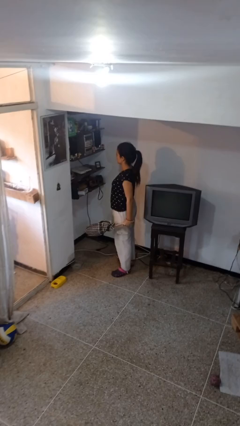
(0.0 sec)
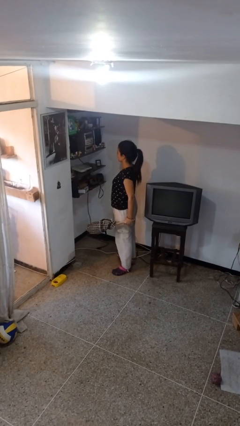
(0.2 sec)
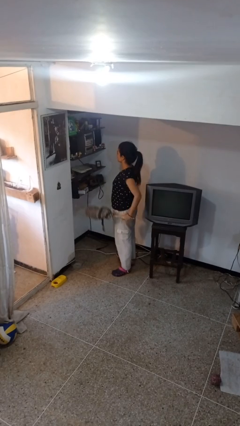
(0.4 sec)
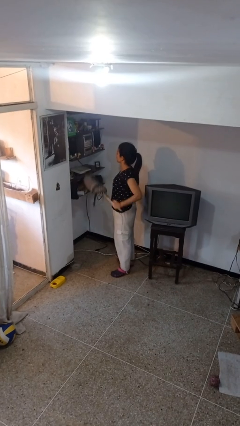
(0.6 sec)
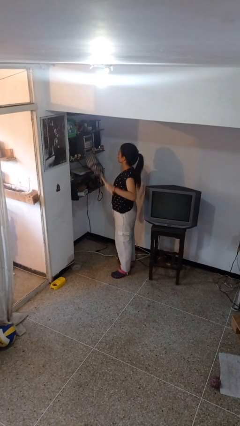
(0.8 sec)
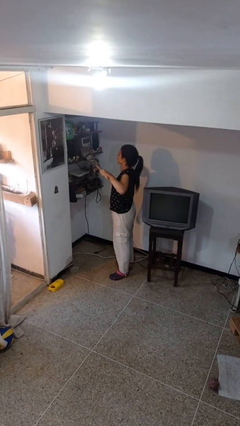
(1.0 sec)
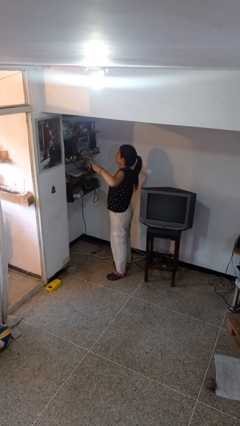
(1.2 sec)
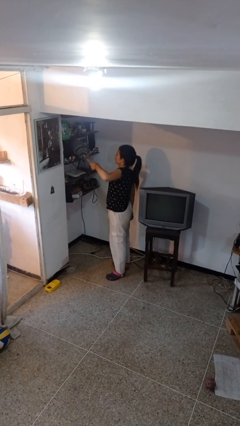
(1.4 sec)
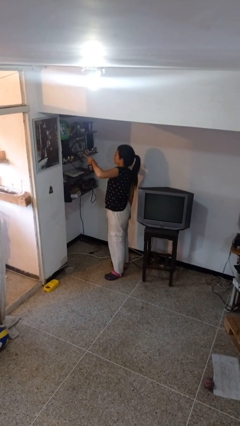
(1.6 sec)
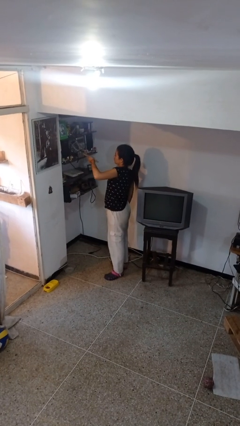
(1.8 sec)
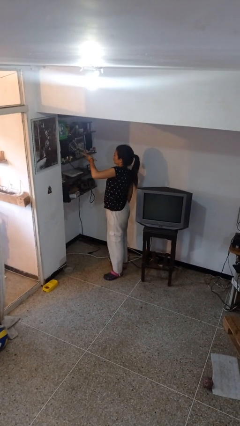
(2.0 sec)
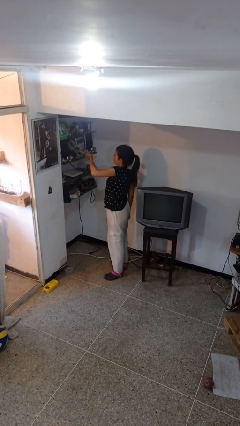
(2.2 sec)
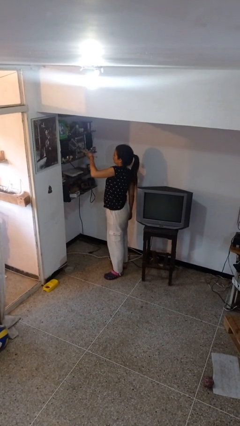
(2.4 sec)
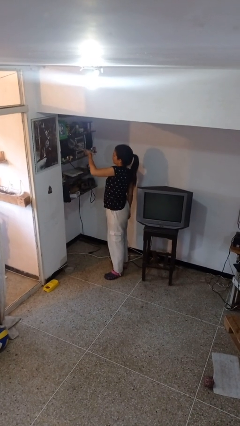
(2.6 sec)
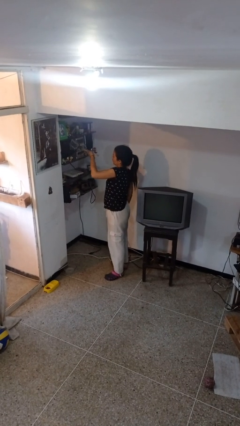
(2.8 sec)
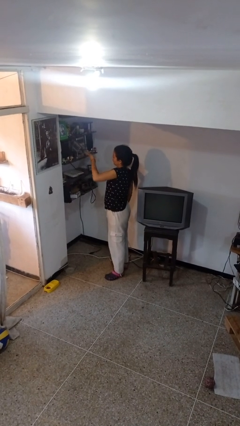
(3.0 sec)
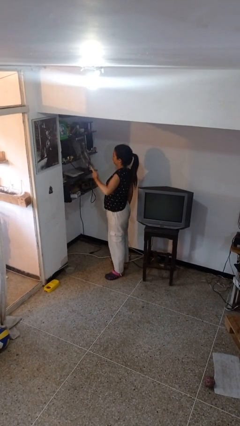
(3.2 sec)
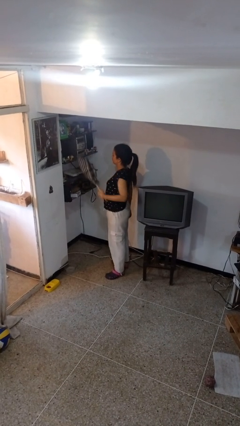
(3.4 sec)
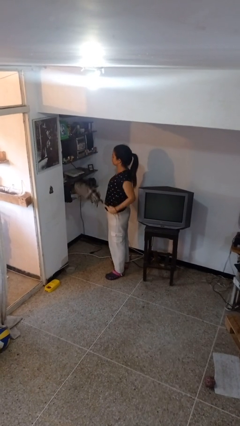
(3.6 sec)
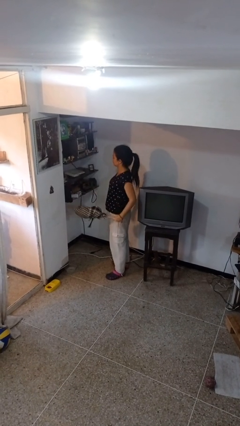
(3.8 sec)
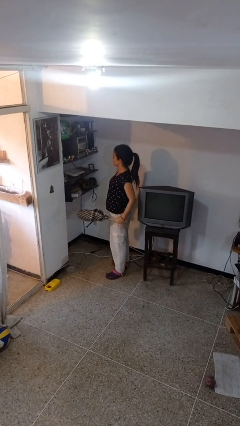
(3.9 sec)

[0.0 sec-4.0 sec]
person dusts furniture

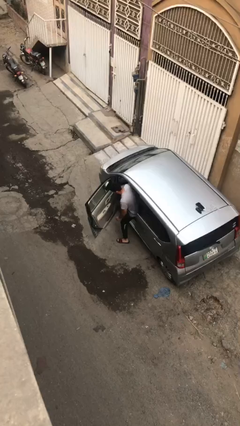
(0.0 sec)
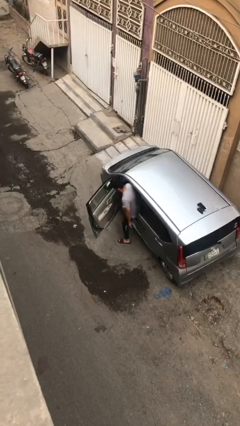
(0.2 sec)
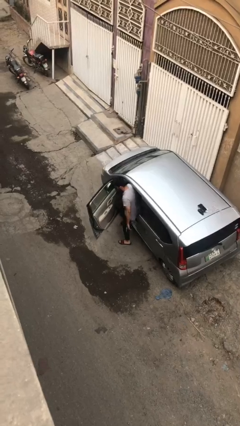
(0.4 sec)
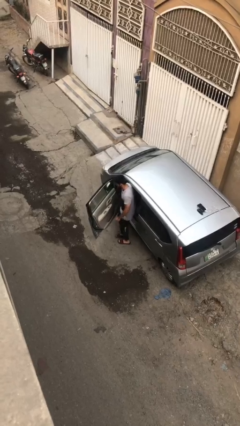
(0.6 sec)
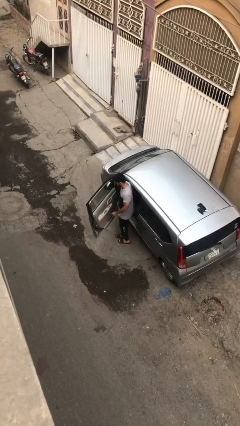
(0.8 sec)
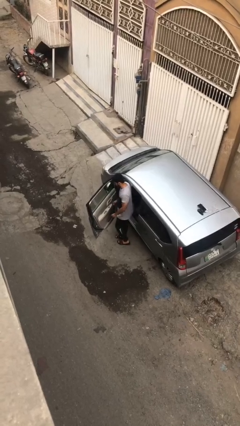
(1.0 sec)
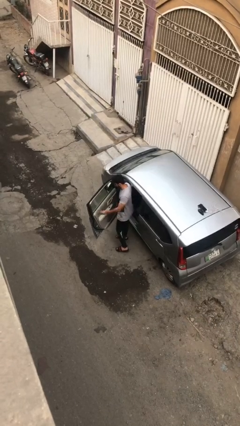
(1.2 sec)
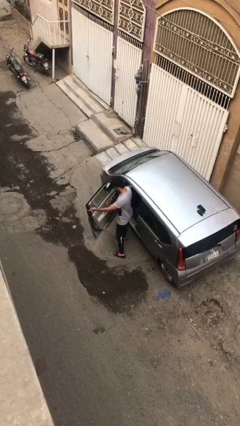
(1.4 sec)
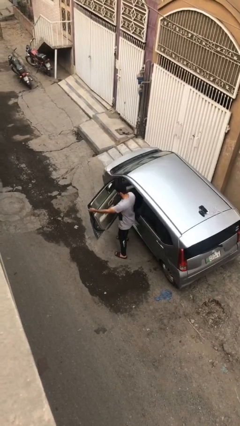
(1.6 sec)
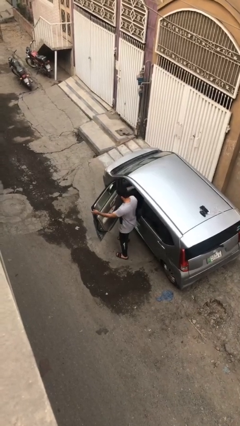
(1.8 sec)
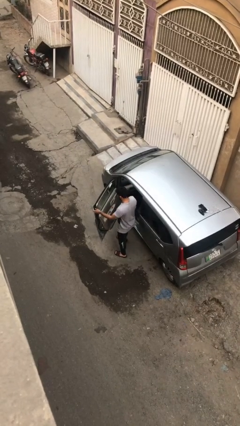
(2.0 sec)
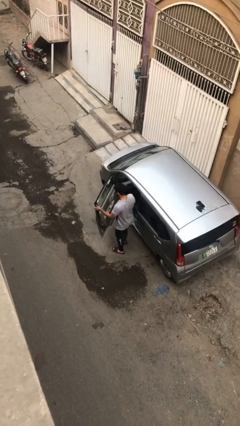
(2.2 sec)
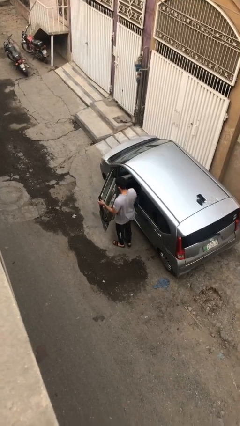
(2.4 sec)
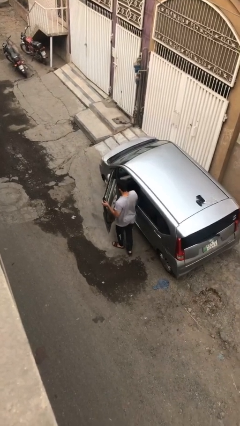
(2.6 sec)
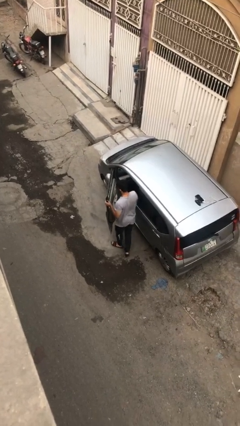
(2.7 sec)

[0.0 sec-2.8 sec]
person exits car

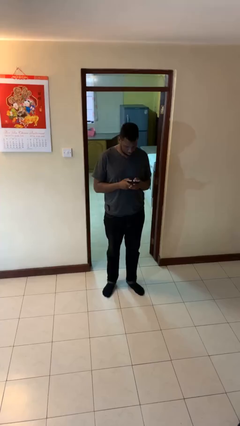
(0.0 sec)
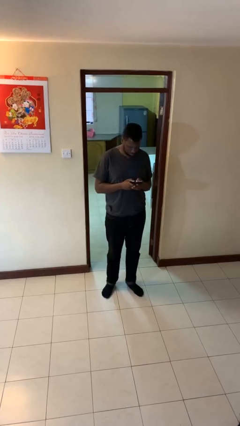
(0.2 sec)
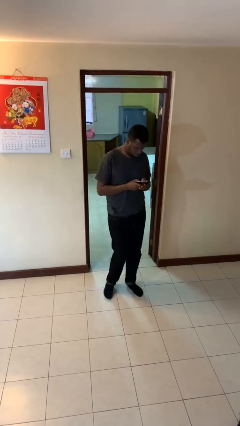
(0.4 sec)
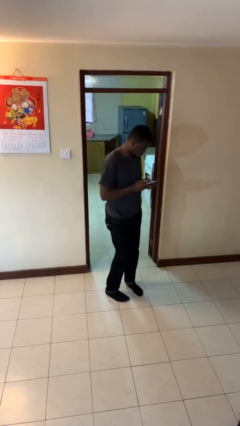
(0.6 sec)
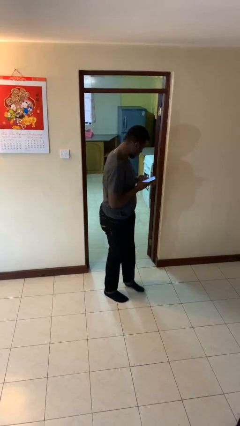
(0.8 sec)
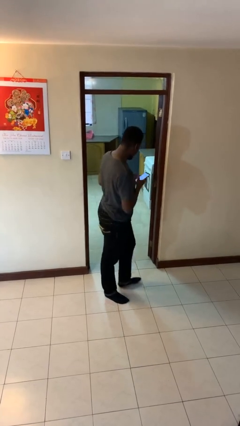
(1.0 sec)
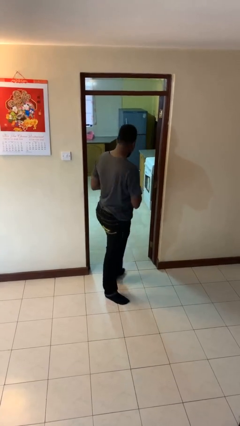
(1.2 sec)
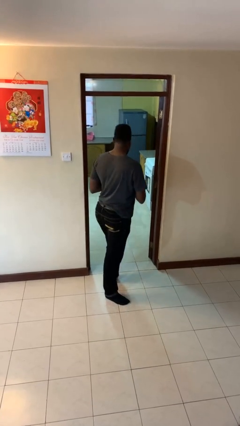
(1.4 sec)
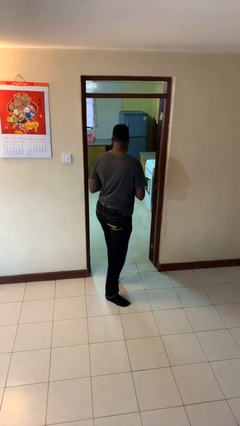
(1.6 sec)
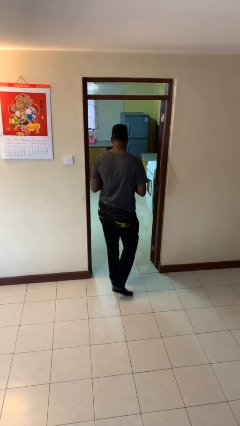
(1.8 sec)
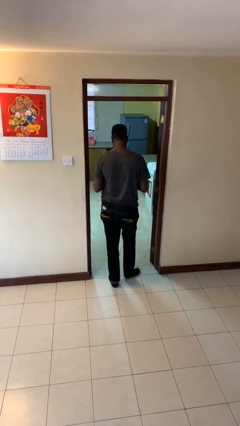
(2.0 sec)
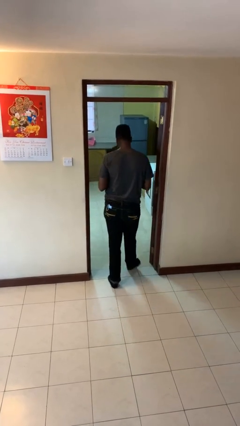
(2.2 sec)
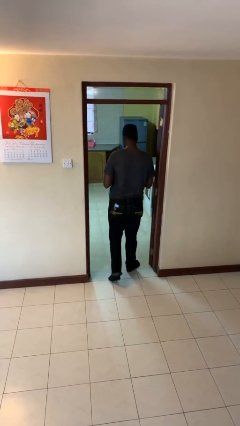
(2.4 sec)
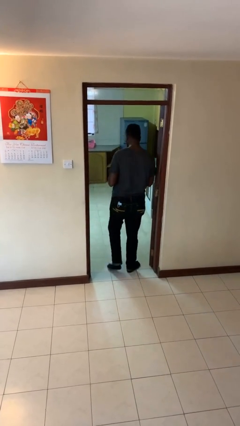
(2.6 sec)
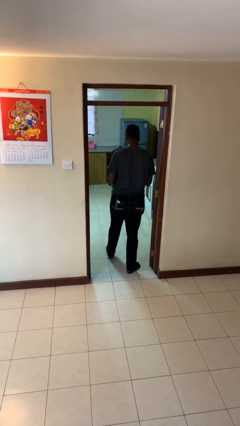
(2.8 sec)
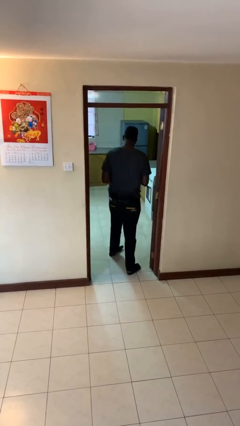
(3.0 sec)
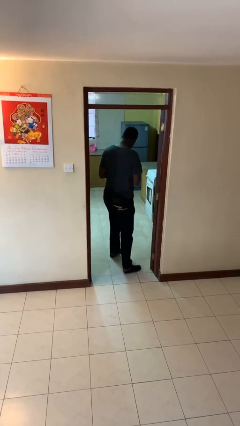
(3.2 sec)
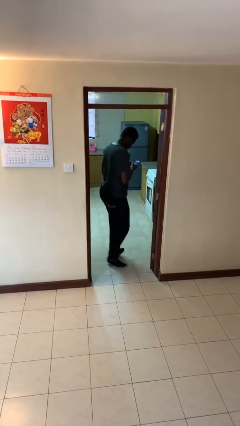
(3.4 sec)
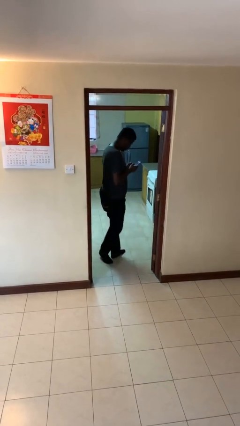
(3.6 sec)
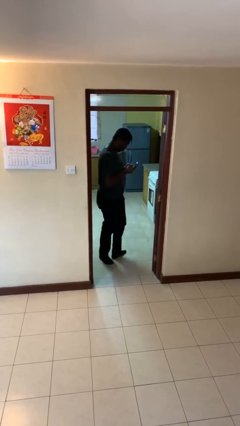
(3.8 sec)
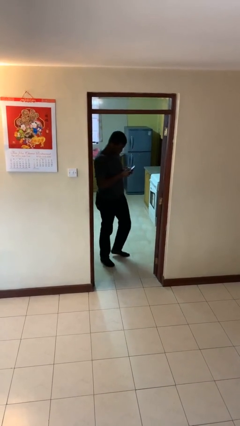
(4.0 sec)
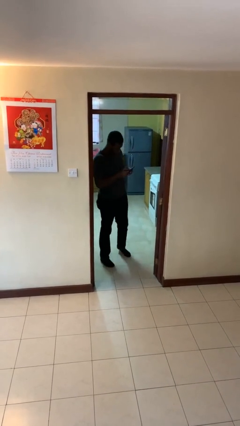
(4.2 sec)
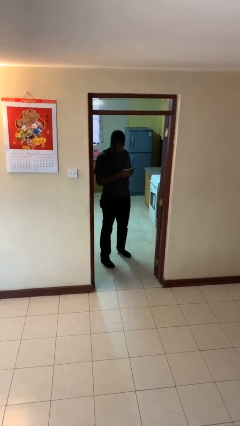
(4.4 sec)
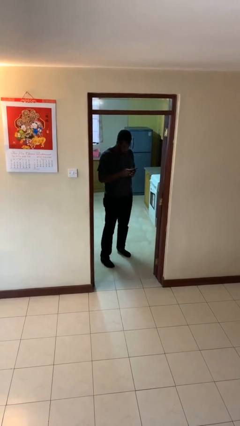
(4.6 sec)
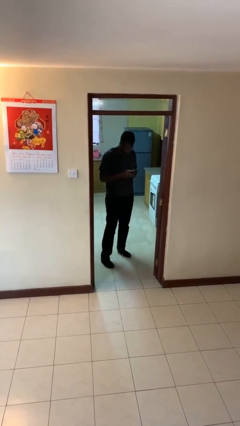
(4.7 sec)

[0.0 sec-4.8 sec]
person exits scene through structure

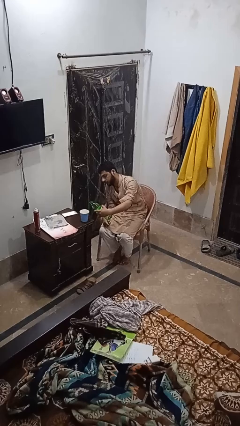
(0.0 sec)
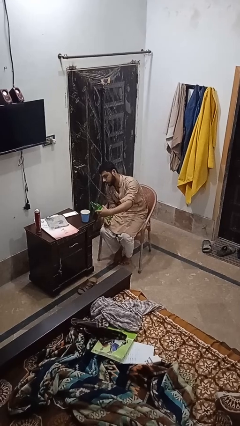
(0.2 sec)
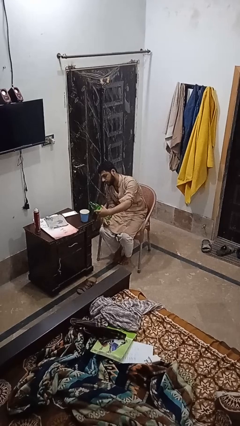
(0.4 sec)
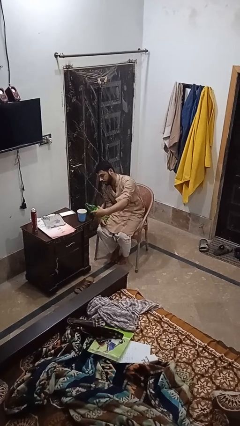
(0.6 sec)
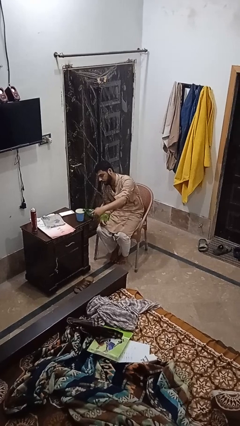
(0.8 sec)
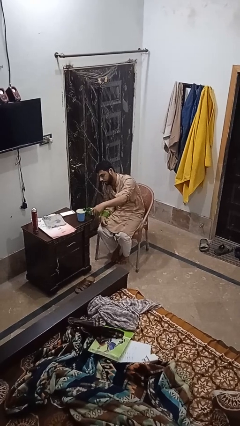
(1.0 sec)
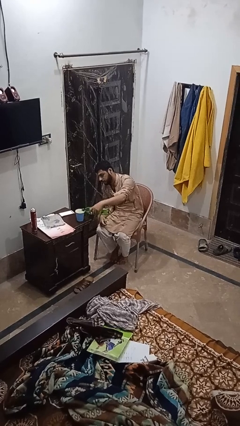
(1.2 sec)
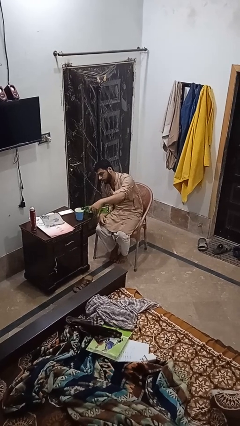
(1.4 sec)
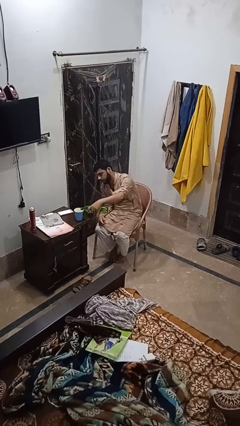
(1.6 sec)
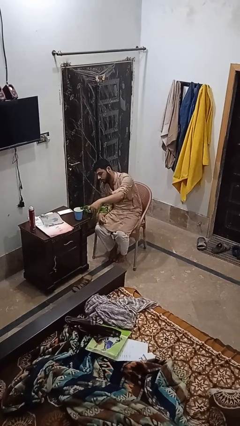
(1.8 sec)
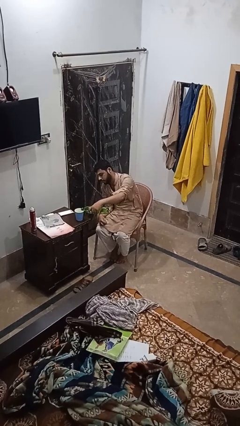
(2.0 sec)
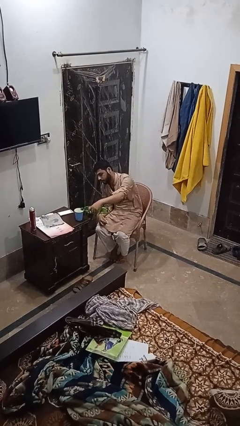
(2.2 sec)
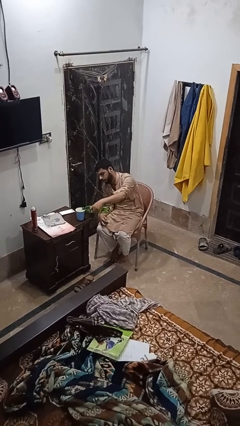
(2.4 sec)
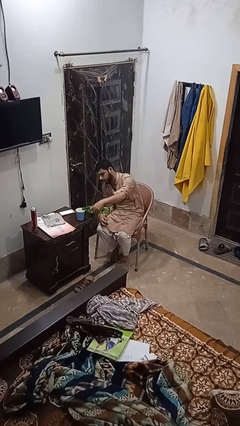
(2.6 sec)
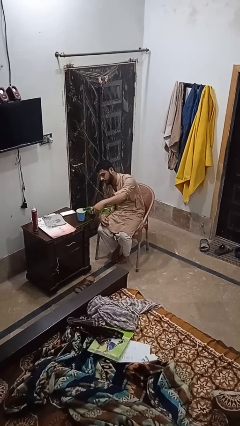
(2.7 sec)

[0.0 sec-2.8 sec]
person pours liquid into cup

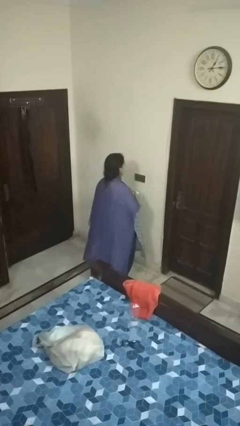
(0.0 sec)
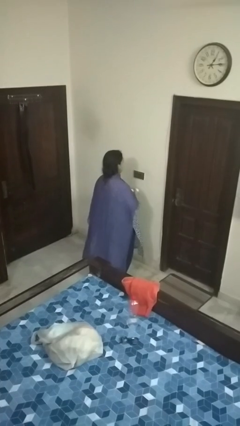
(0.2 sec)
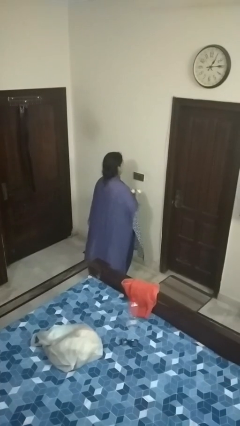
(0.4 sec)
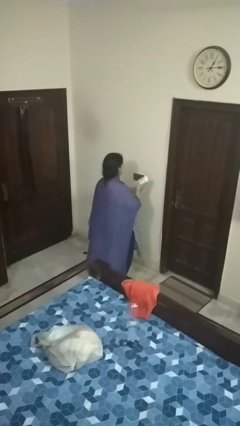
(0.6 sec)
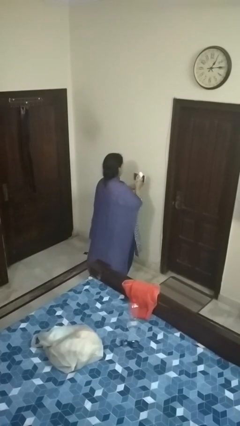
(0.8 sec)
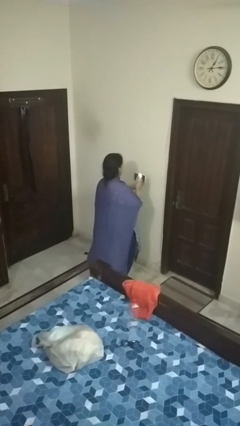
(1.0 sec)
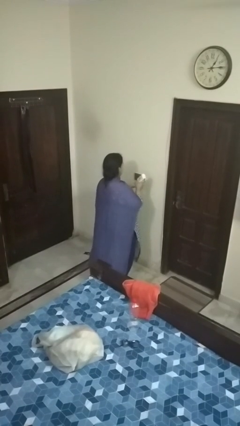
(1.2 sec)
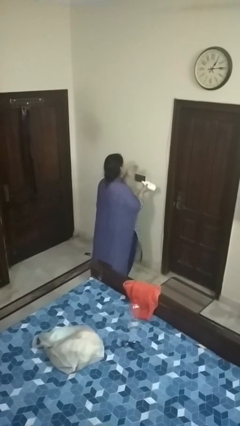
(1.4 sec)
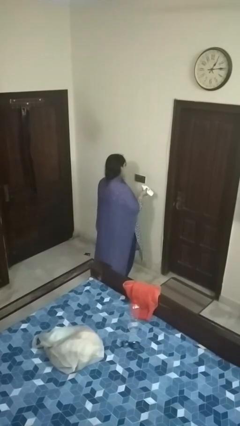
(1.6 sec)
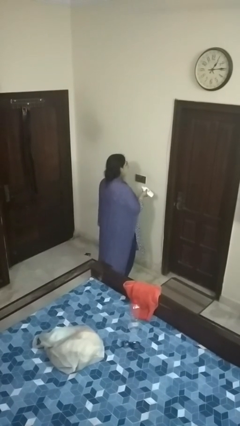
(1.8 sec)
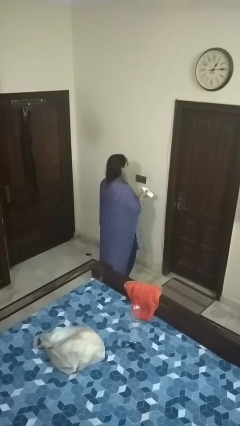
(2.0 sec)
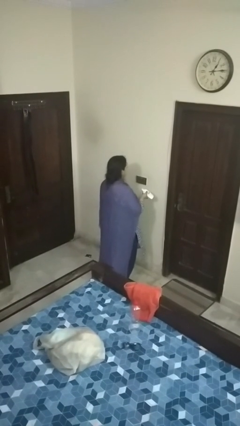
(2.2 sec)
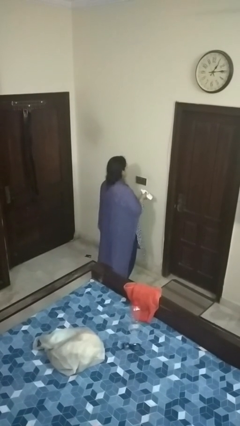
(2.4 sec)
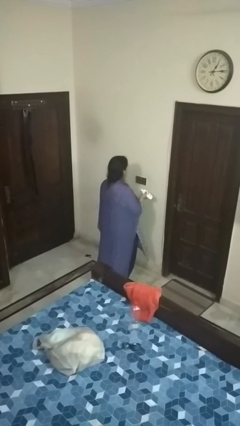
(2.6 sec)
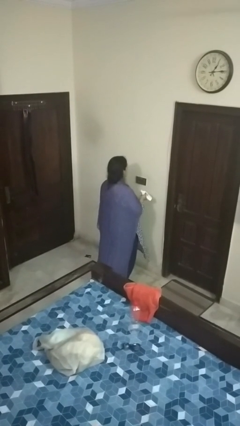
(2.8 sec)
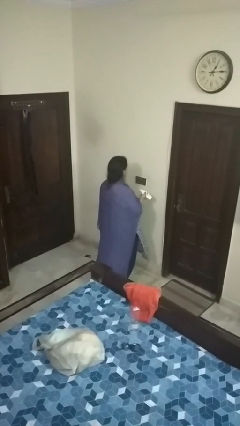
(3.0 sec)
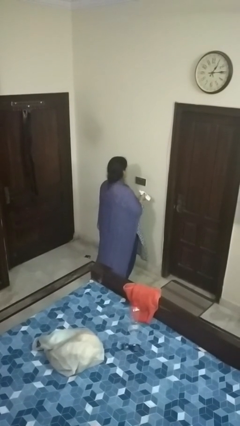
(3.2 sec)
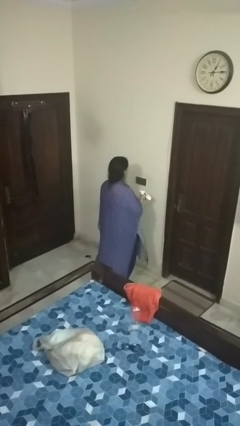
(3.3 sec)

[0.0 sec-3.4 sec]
person applies facial moisturizer
